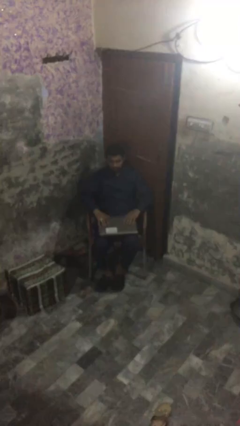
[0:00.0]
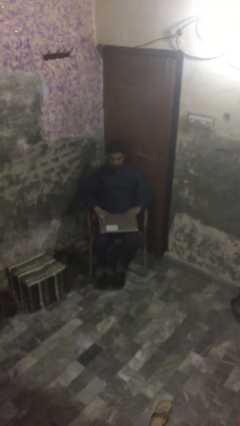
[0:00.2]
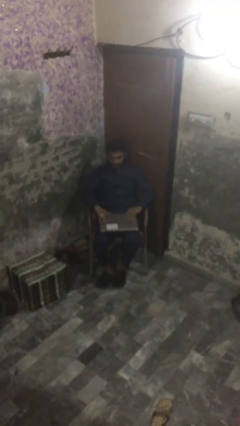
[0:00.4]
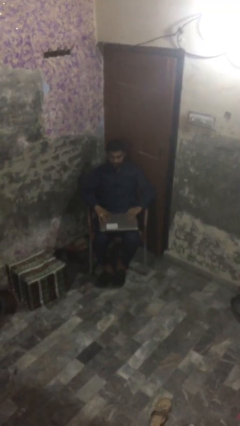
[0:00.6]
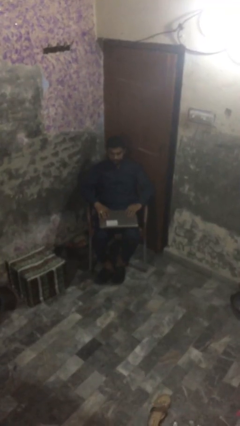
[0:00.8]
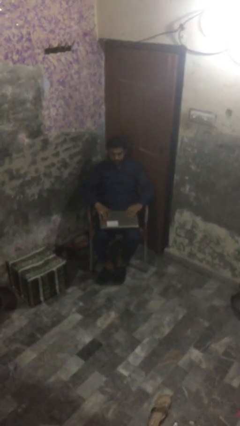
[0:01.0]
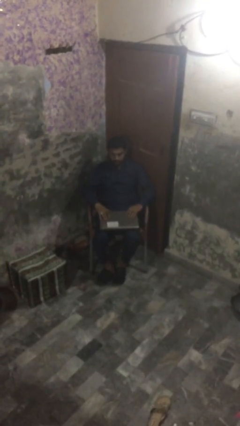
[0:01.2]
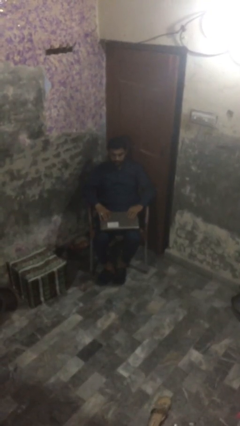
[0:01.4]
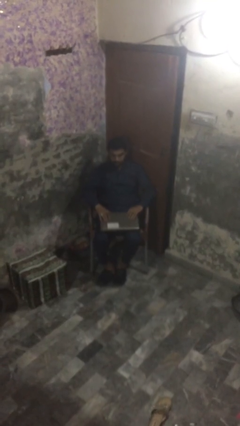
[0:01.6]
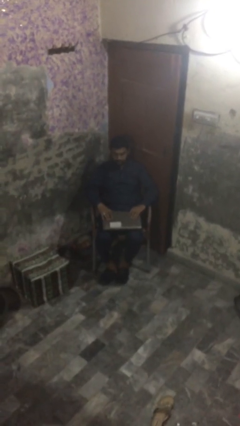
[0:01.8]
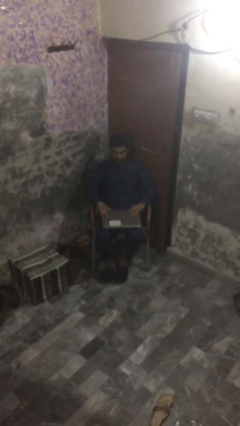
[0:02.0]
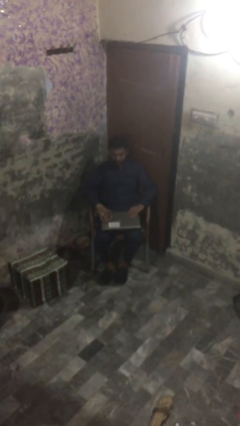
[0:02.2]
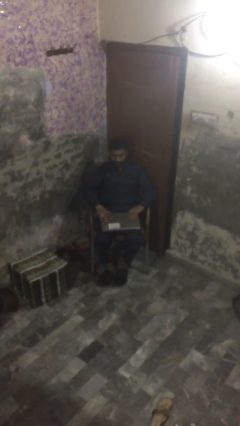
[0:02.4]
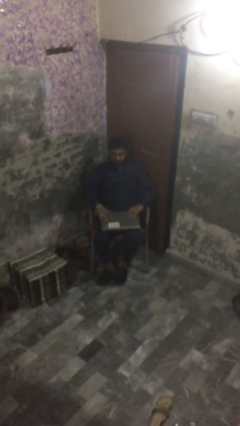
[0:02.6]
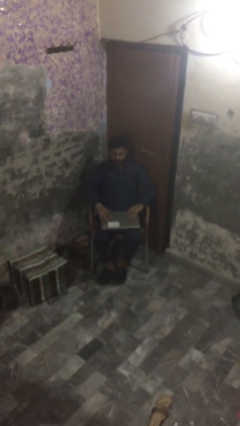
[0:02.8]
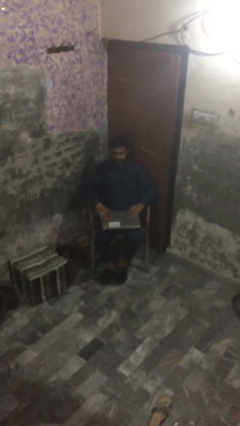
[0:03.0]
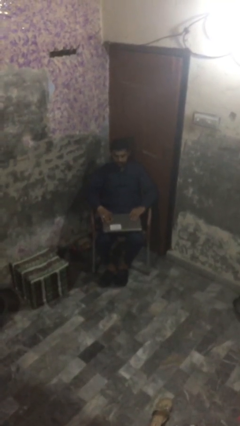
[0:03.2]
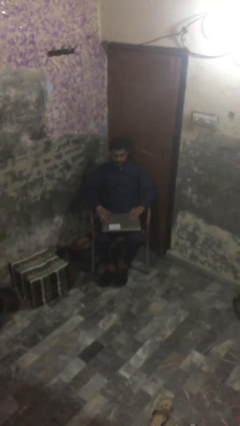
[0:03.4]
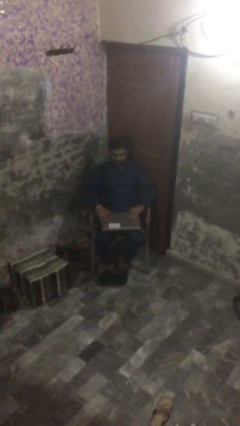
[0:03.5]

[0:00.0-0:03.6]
person sits down

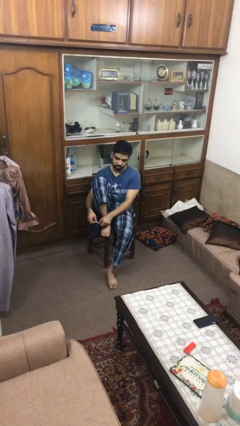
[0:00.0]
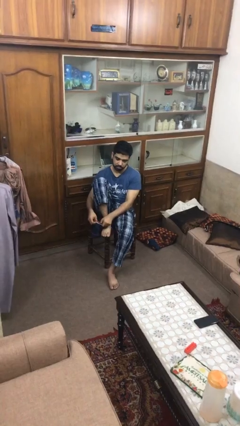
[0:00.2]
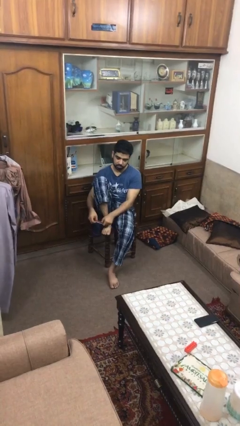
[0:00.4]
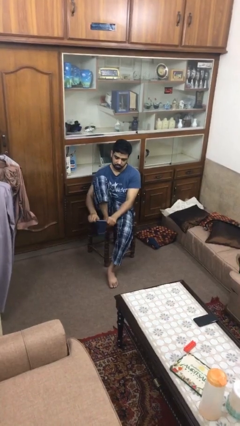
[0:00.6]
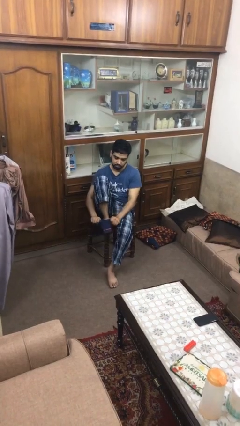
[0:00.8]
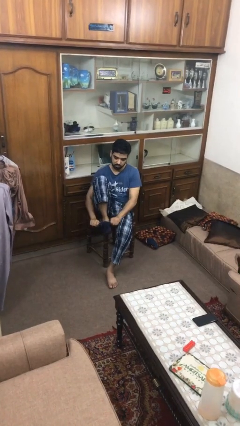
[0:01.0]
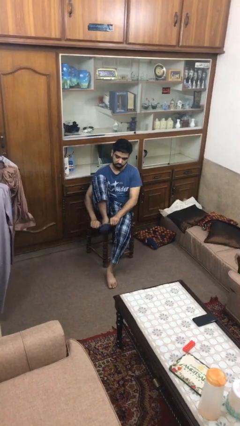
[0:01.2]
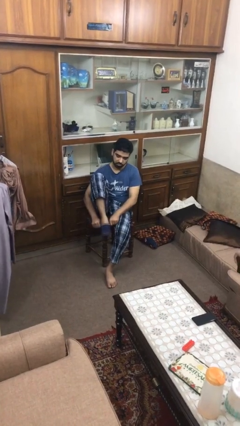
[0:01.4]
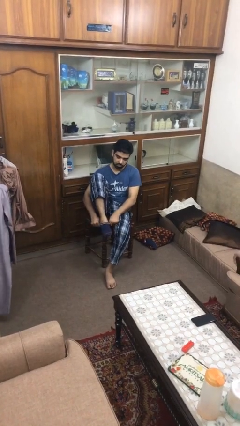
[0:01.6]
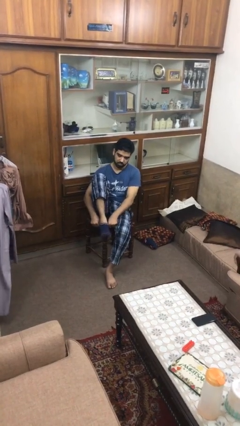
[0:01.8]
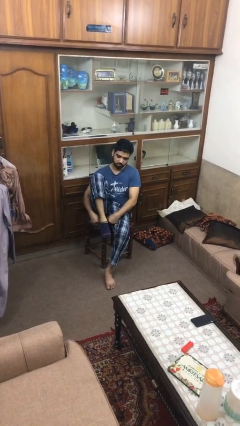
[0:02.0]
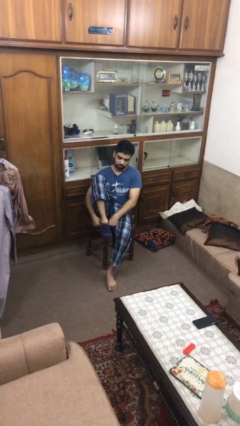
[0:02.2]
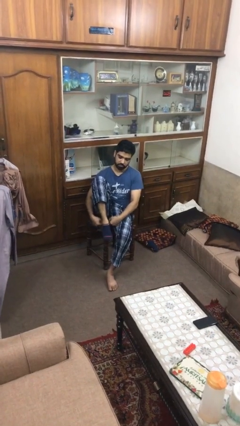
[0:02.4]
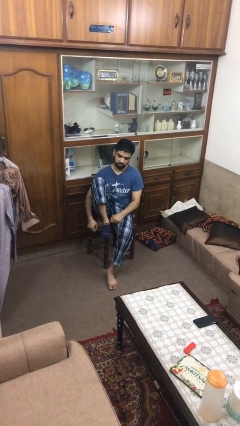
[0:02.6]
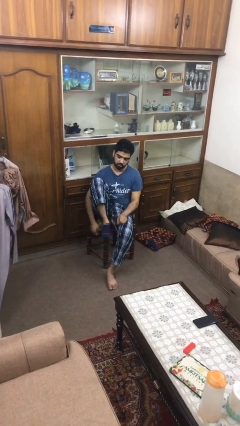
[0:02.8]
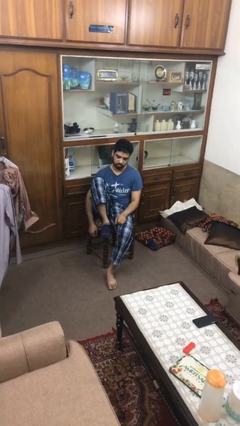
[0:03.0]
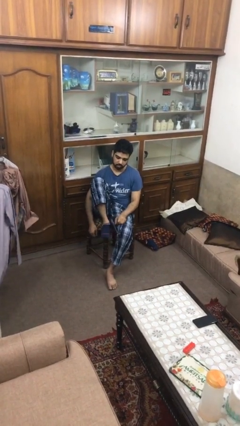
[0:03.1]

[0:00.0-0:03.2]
person puts on socks

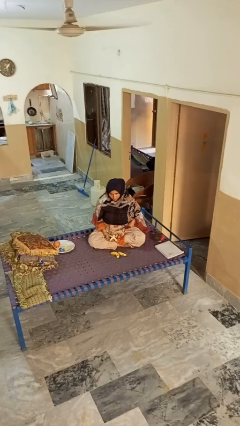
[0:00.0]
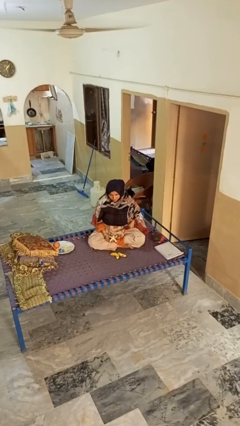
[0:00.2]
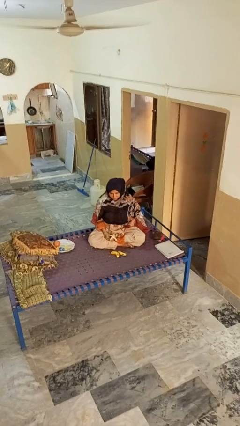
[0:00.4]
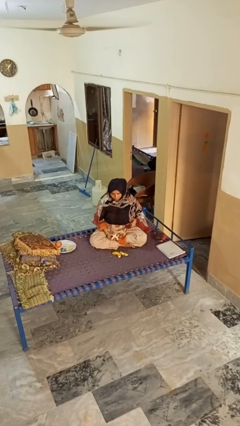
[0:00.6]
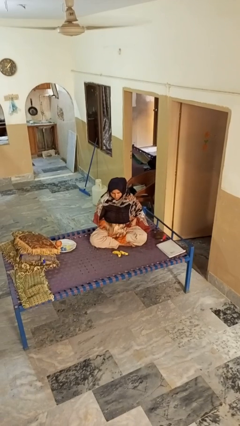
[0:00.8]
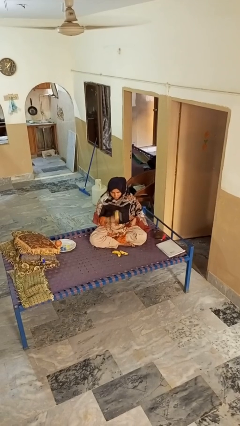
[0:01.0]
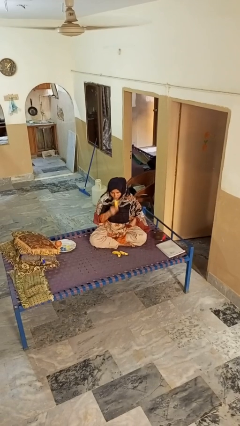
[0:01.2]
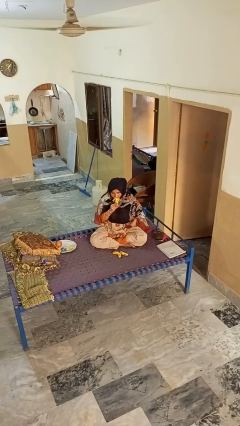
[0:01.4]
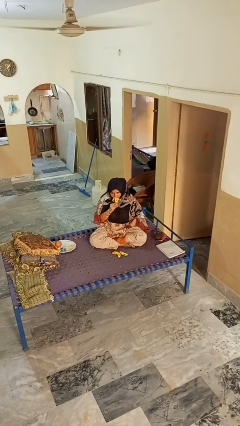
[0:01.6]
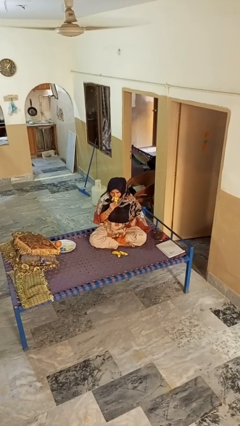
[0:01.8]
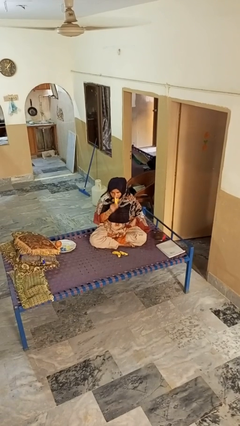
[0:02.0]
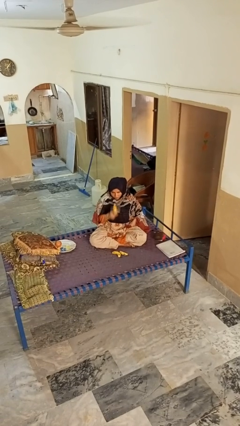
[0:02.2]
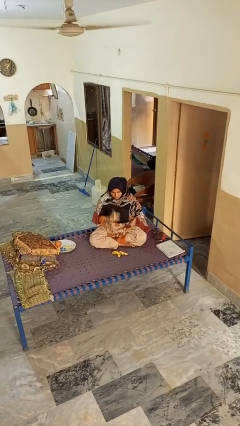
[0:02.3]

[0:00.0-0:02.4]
person eats banana

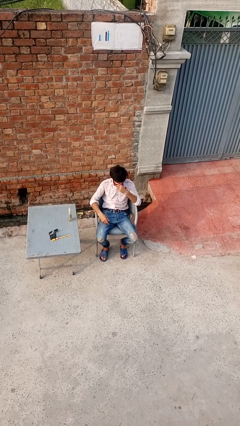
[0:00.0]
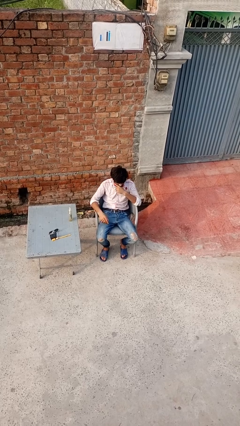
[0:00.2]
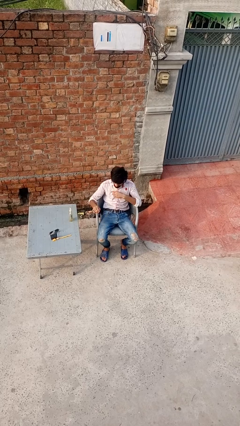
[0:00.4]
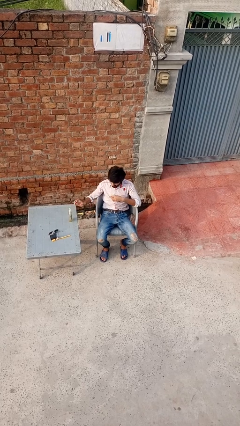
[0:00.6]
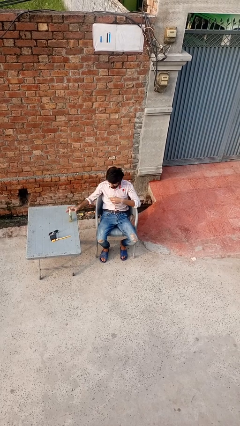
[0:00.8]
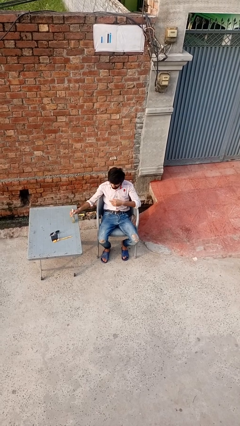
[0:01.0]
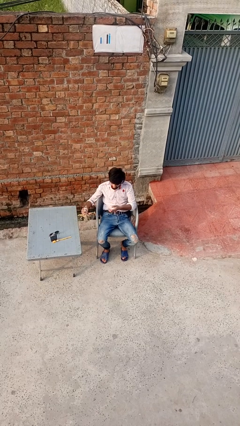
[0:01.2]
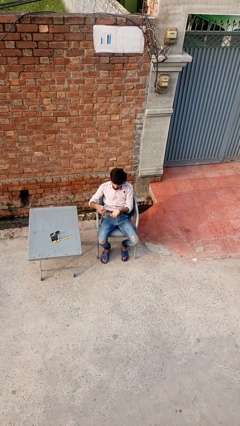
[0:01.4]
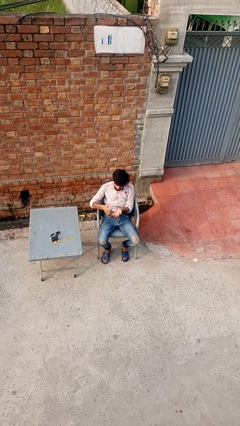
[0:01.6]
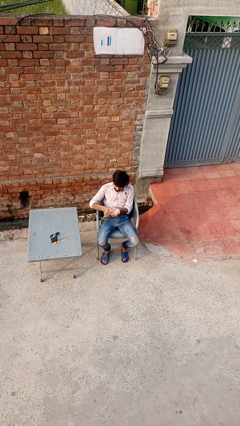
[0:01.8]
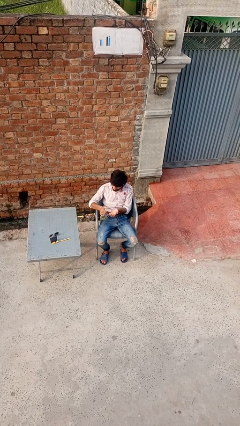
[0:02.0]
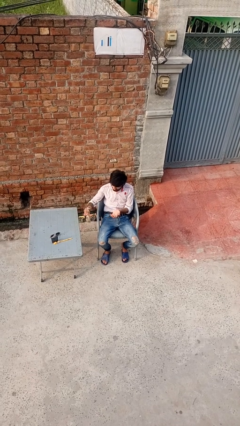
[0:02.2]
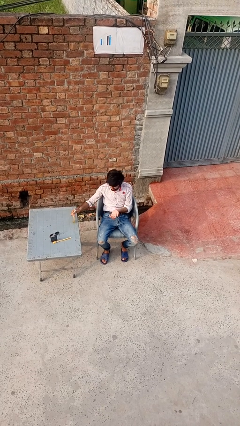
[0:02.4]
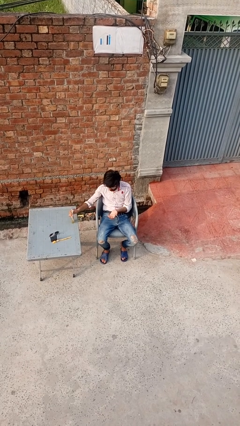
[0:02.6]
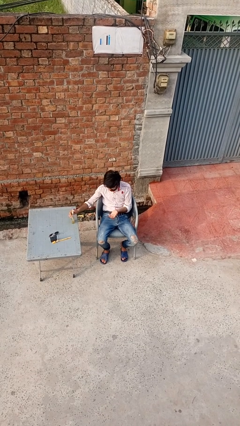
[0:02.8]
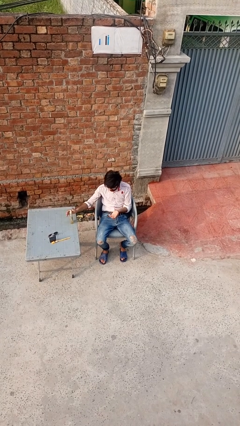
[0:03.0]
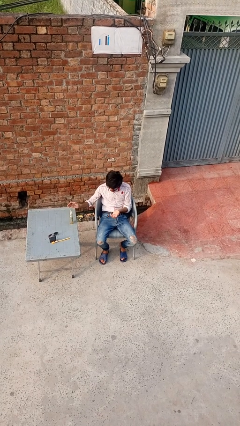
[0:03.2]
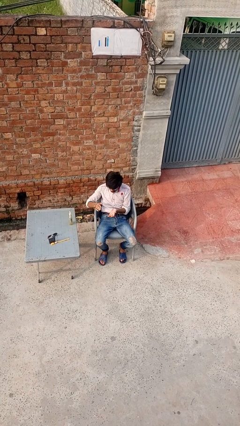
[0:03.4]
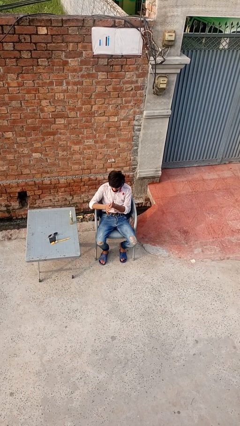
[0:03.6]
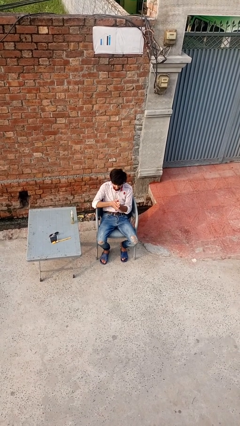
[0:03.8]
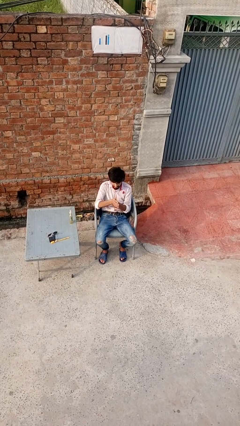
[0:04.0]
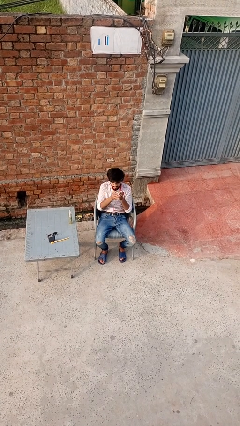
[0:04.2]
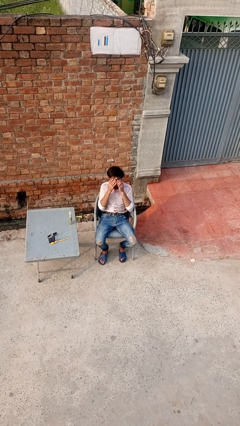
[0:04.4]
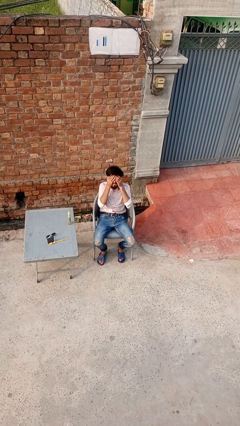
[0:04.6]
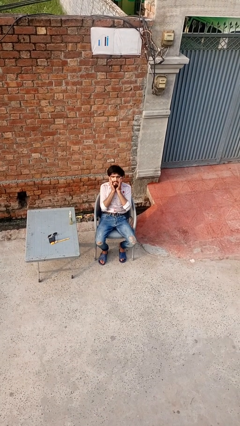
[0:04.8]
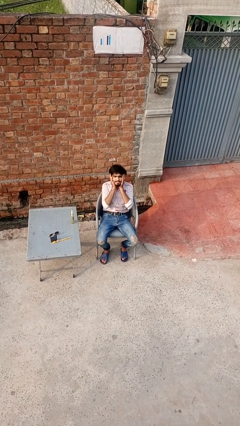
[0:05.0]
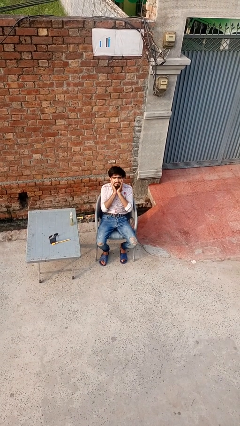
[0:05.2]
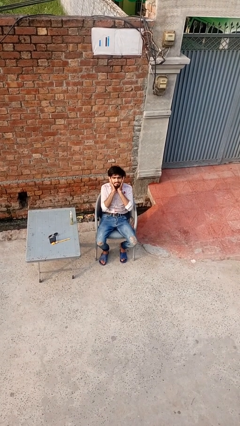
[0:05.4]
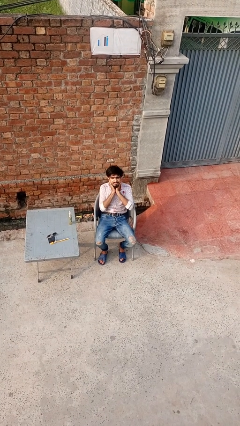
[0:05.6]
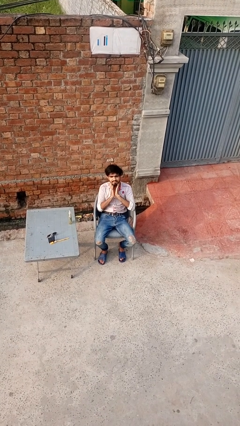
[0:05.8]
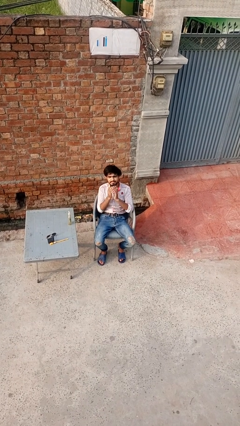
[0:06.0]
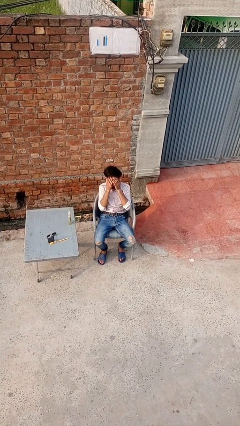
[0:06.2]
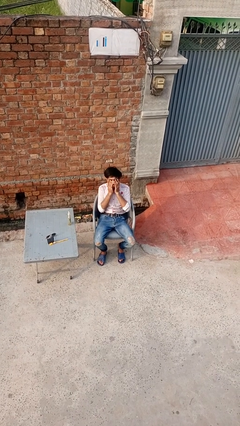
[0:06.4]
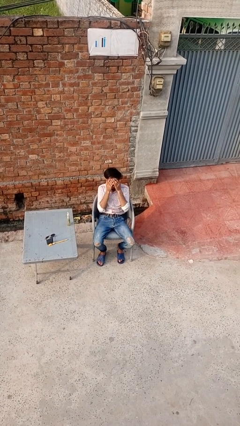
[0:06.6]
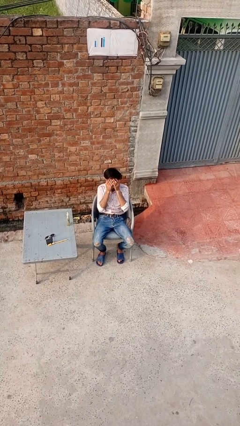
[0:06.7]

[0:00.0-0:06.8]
person applies sunscreen

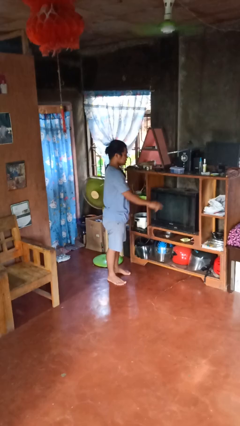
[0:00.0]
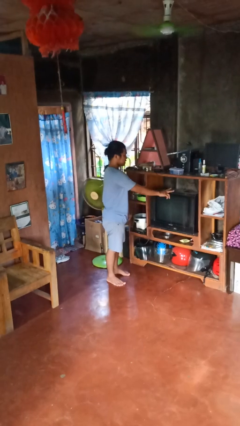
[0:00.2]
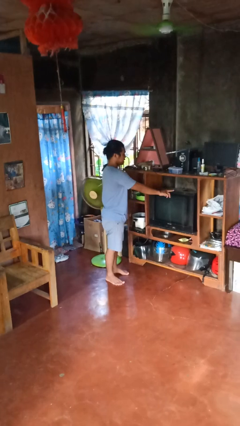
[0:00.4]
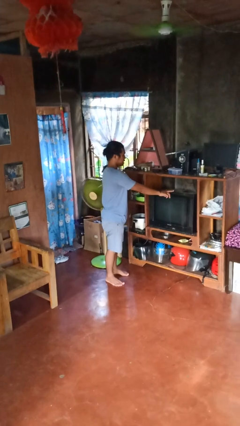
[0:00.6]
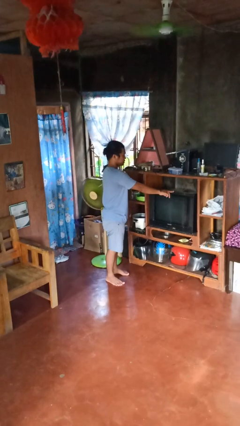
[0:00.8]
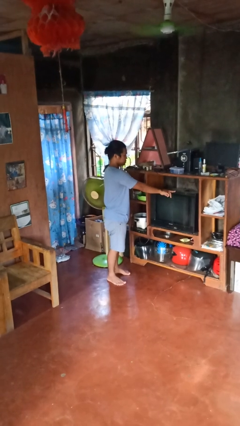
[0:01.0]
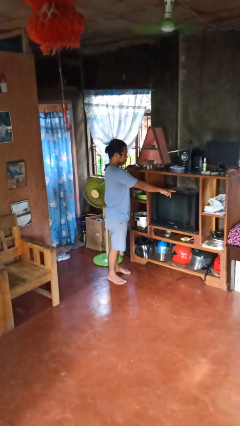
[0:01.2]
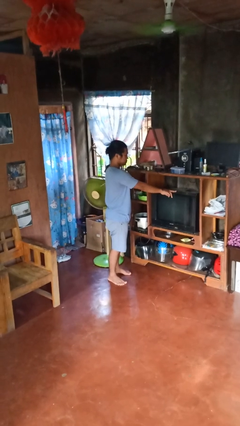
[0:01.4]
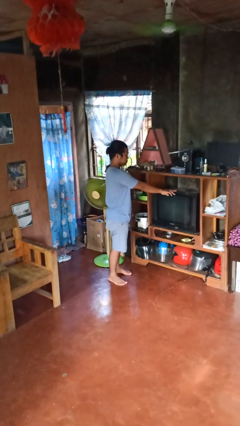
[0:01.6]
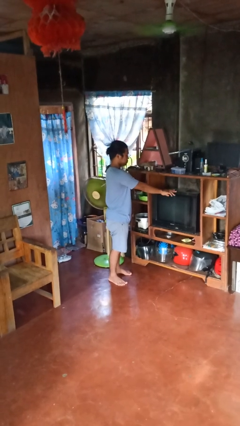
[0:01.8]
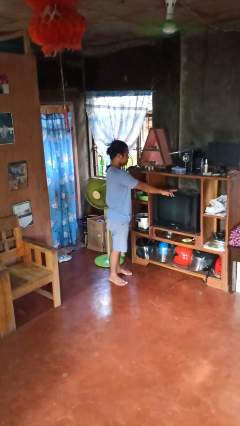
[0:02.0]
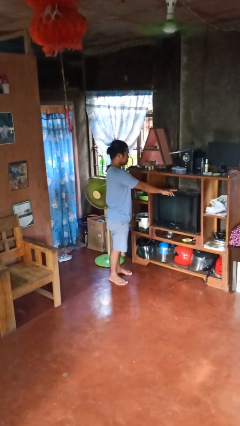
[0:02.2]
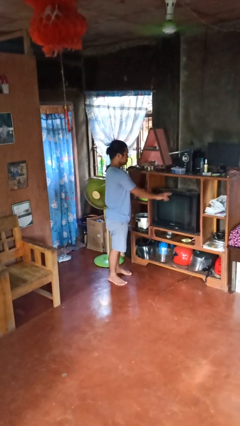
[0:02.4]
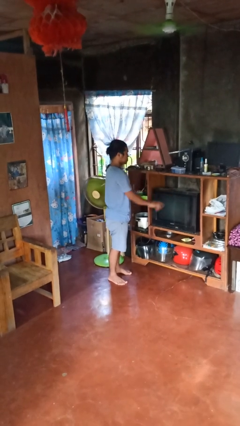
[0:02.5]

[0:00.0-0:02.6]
person taps object with finger
